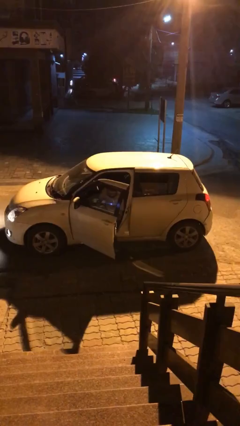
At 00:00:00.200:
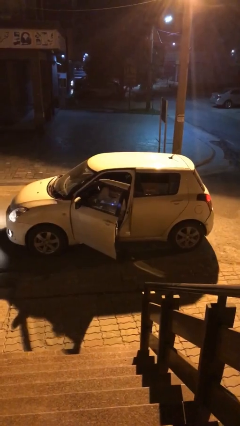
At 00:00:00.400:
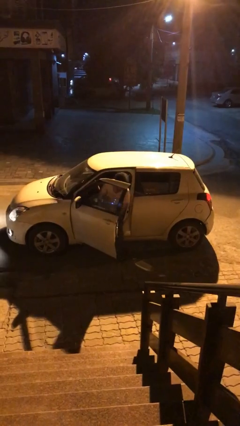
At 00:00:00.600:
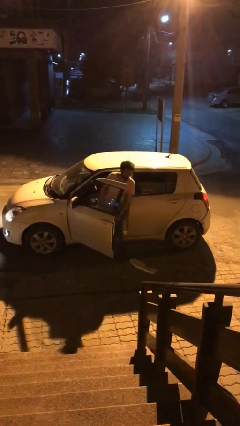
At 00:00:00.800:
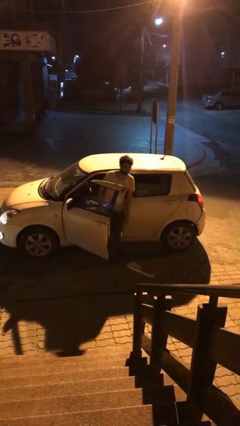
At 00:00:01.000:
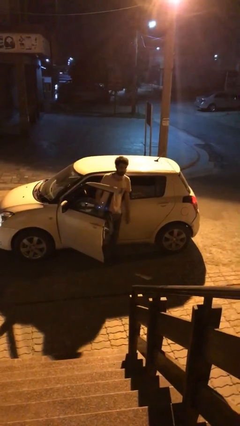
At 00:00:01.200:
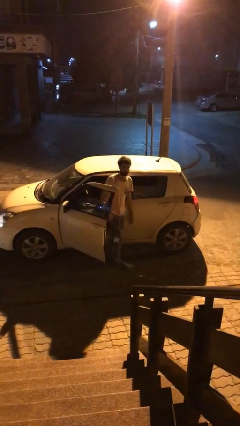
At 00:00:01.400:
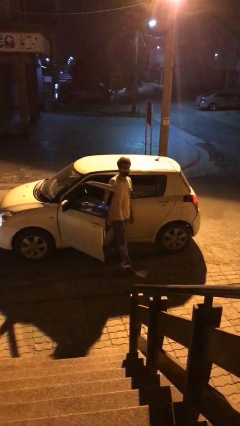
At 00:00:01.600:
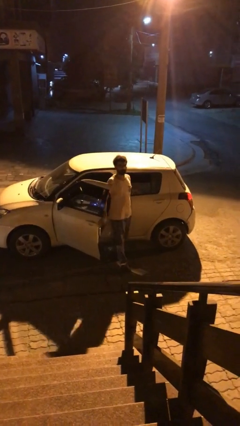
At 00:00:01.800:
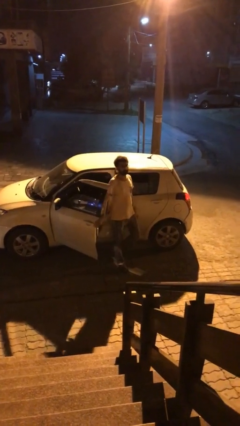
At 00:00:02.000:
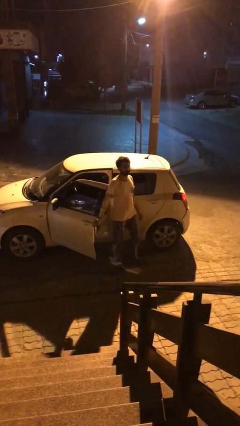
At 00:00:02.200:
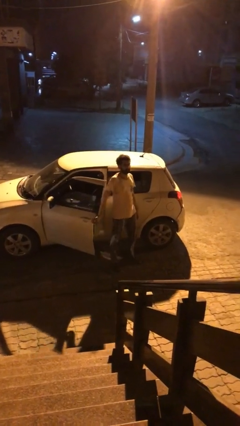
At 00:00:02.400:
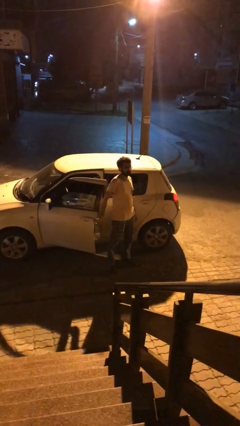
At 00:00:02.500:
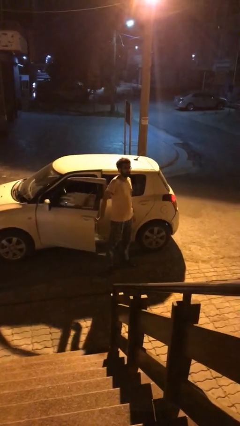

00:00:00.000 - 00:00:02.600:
person exits car

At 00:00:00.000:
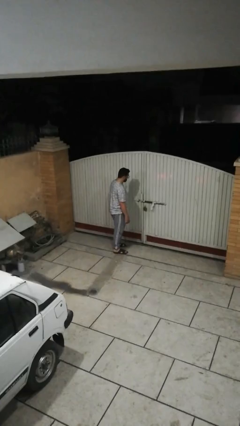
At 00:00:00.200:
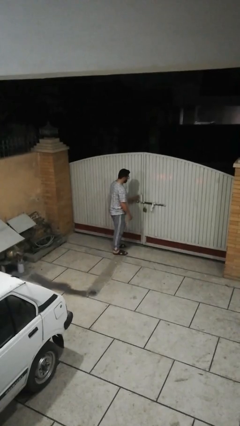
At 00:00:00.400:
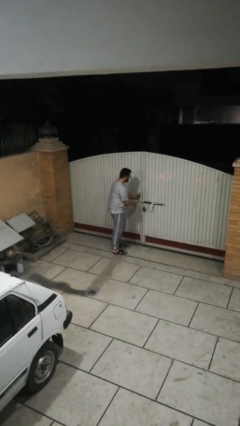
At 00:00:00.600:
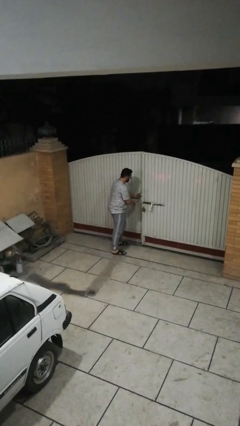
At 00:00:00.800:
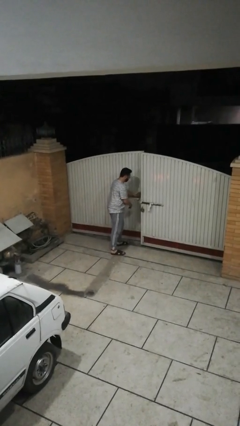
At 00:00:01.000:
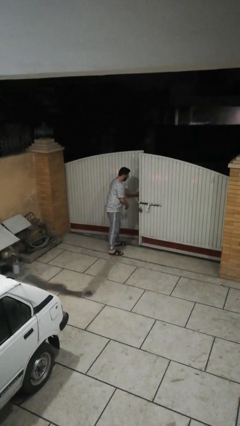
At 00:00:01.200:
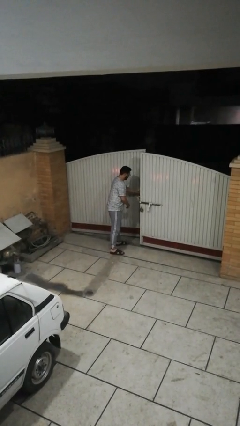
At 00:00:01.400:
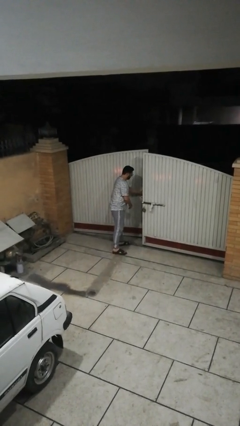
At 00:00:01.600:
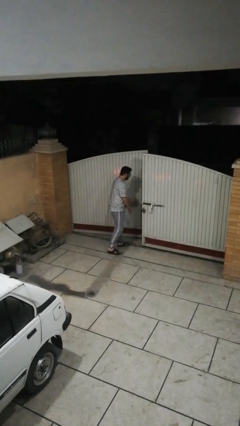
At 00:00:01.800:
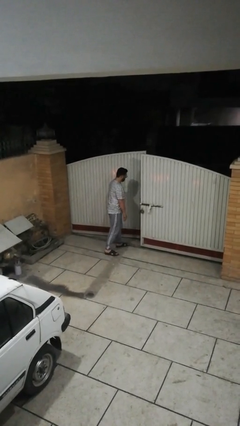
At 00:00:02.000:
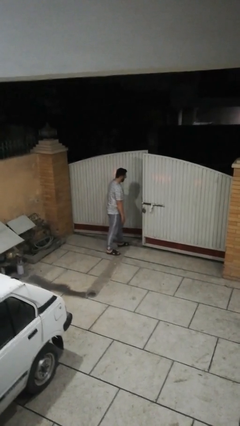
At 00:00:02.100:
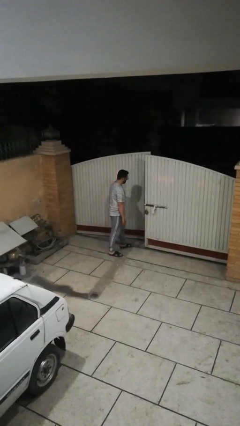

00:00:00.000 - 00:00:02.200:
person opens facility door

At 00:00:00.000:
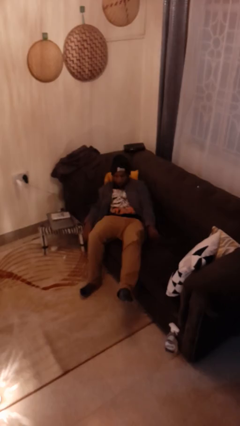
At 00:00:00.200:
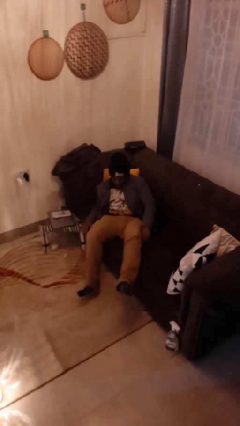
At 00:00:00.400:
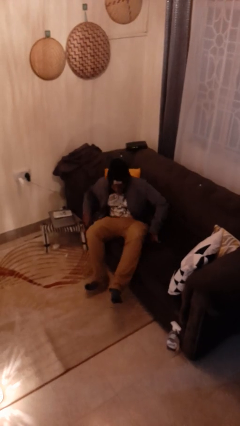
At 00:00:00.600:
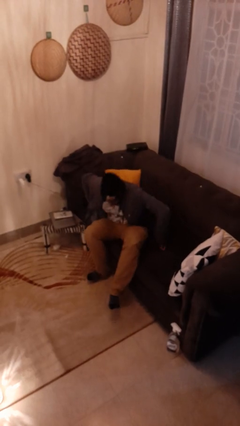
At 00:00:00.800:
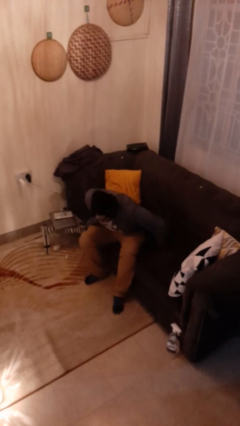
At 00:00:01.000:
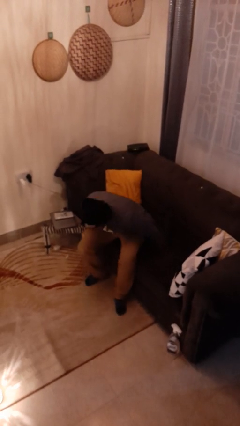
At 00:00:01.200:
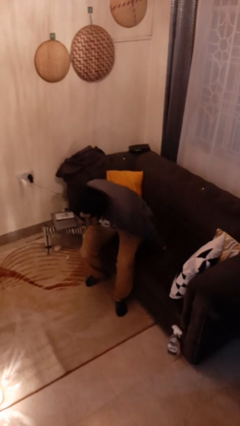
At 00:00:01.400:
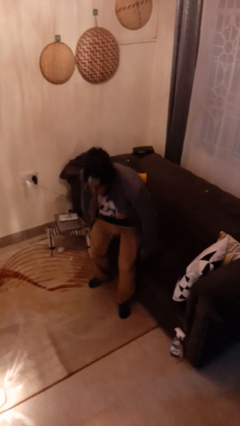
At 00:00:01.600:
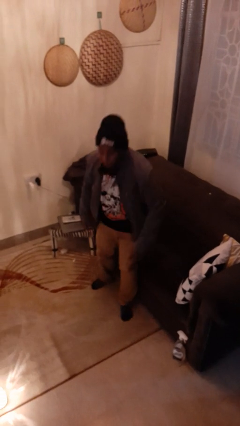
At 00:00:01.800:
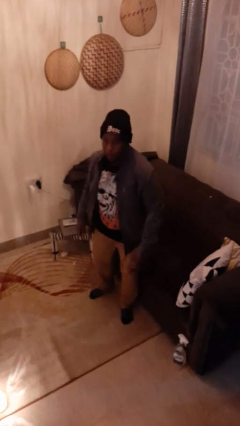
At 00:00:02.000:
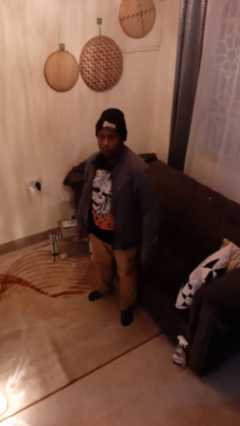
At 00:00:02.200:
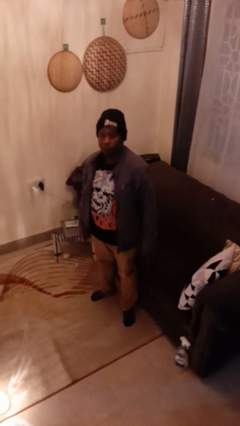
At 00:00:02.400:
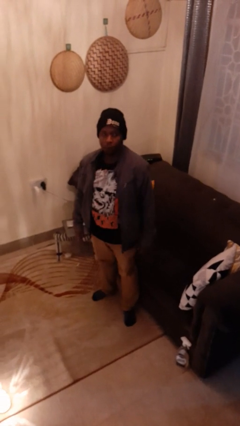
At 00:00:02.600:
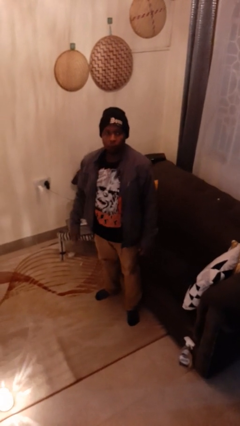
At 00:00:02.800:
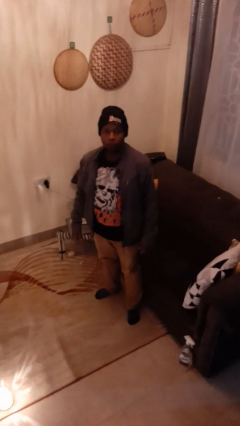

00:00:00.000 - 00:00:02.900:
person stands up

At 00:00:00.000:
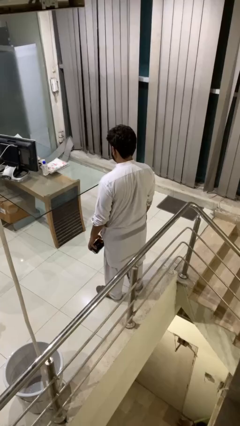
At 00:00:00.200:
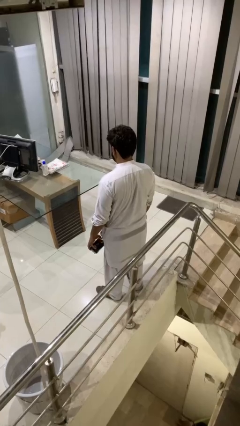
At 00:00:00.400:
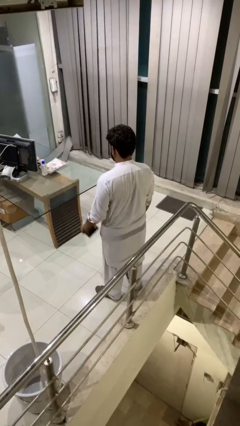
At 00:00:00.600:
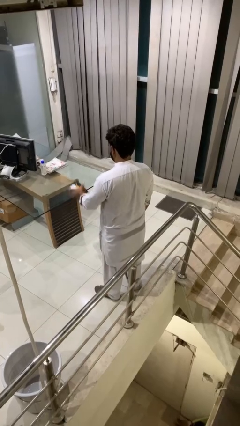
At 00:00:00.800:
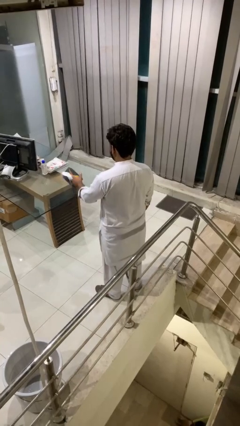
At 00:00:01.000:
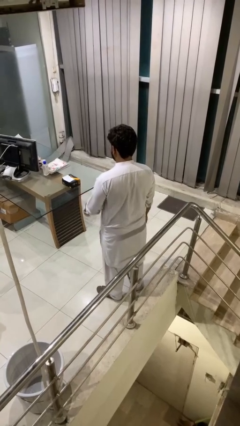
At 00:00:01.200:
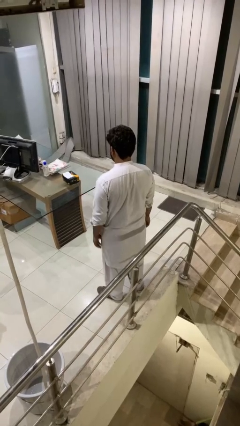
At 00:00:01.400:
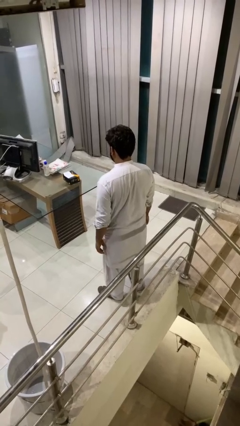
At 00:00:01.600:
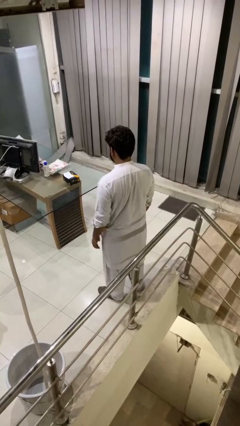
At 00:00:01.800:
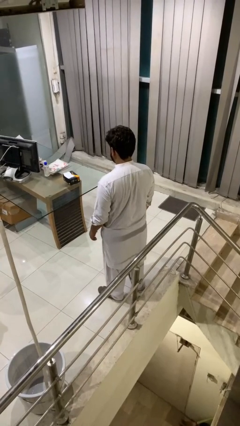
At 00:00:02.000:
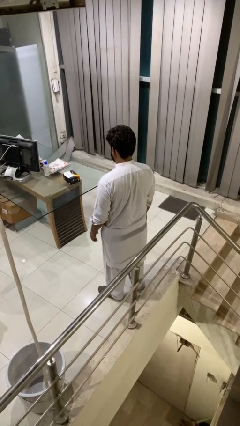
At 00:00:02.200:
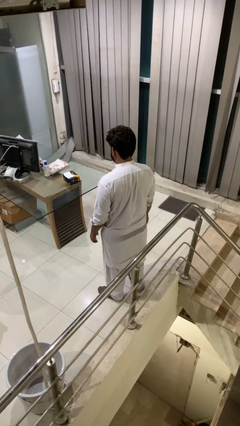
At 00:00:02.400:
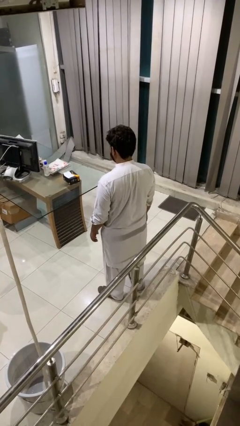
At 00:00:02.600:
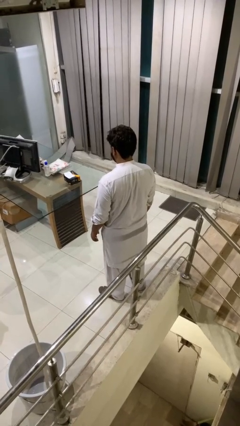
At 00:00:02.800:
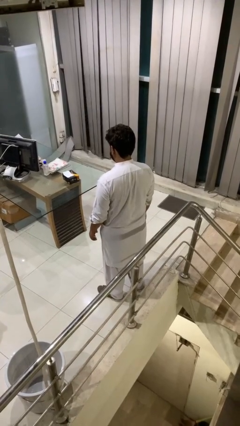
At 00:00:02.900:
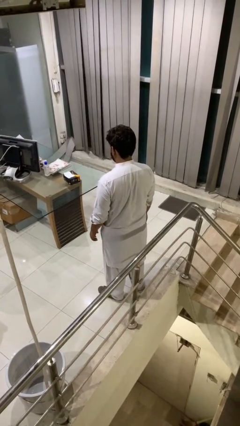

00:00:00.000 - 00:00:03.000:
person throws object on table

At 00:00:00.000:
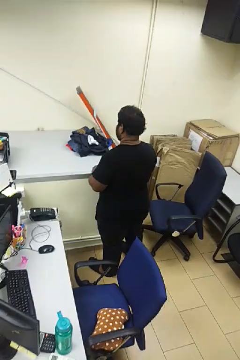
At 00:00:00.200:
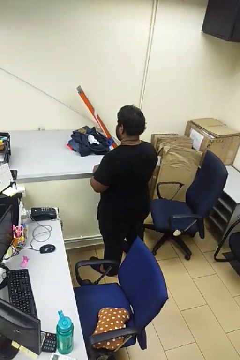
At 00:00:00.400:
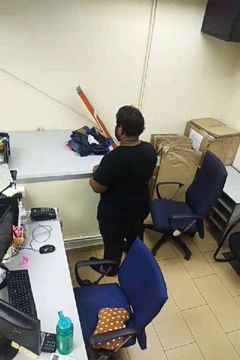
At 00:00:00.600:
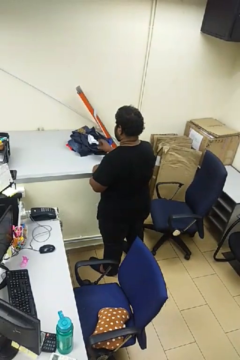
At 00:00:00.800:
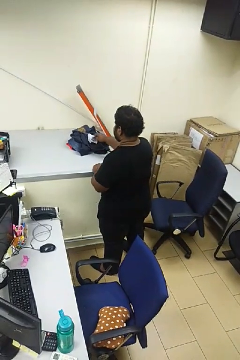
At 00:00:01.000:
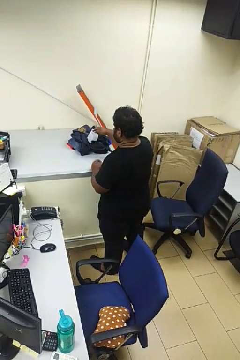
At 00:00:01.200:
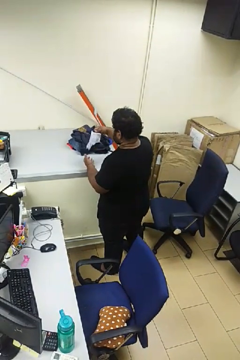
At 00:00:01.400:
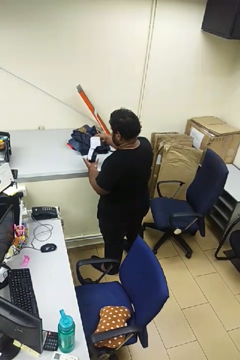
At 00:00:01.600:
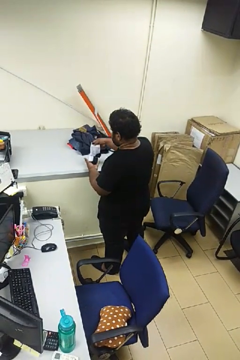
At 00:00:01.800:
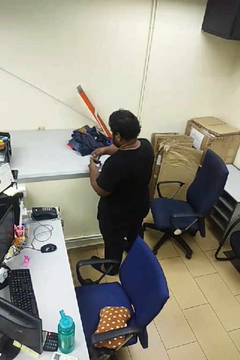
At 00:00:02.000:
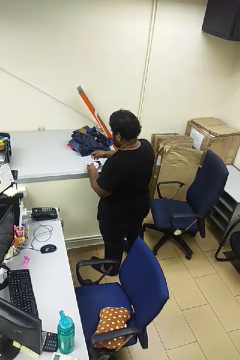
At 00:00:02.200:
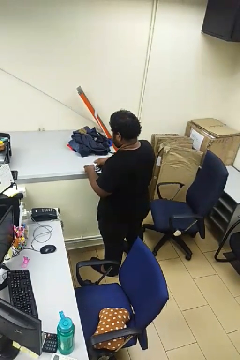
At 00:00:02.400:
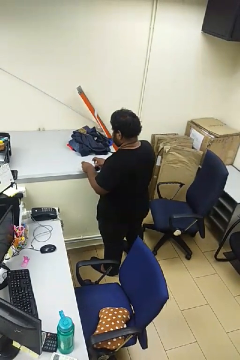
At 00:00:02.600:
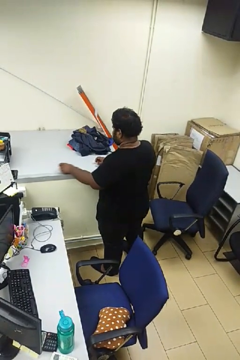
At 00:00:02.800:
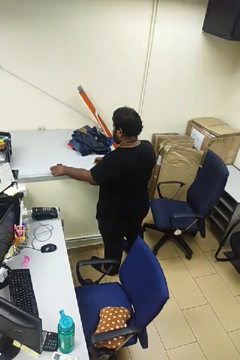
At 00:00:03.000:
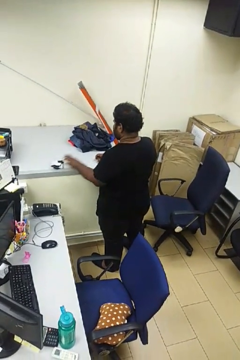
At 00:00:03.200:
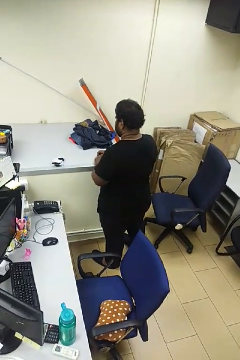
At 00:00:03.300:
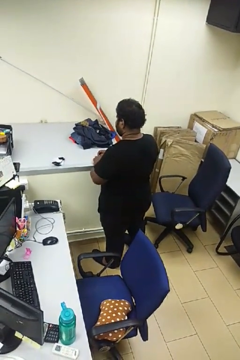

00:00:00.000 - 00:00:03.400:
person folds socks

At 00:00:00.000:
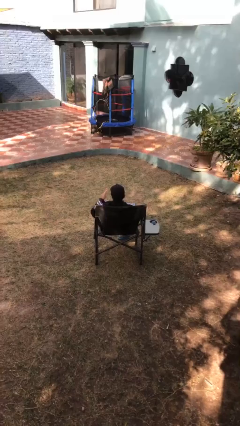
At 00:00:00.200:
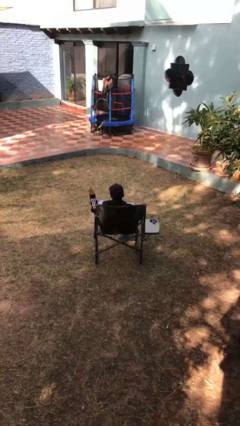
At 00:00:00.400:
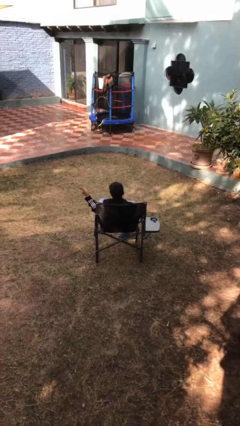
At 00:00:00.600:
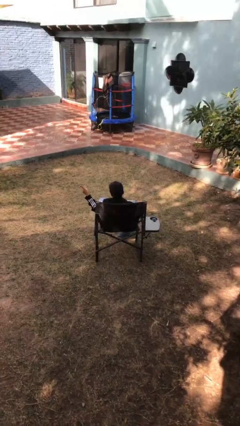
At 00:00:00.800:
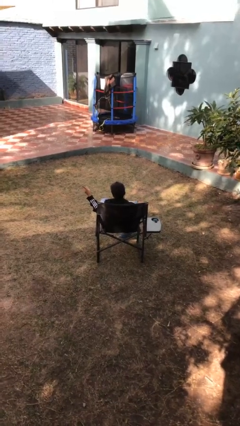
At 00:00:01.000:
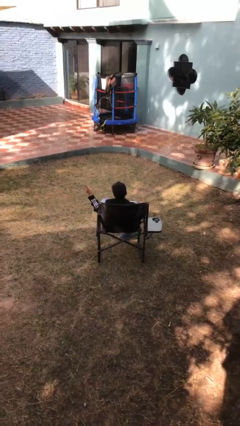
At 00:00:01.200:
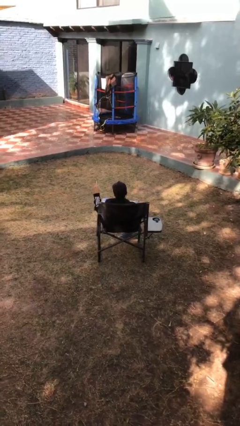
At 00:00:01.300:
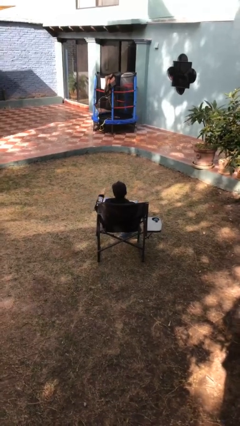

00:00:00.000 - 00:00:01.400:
person gestures number one

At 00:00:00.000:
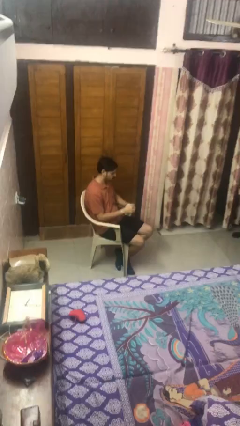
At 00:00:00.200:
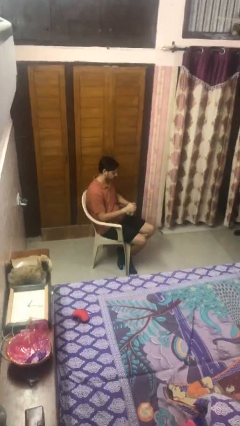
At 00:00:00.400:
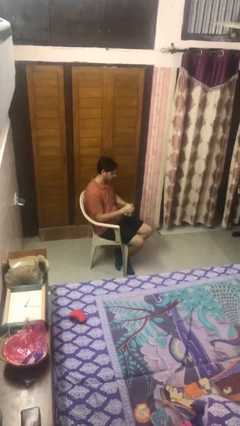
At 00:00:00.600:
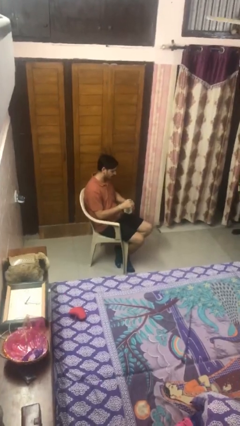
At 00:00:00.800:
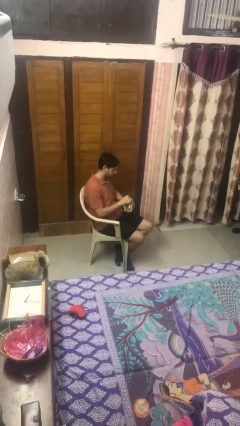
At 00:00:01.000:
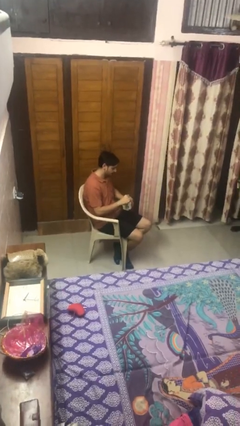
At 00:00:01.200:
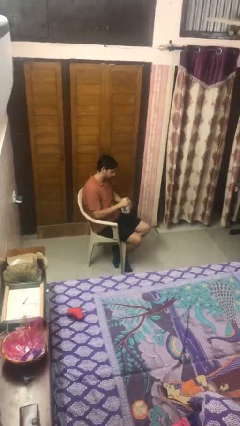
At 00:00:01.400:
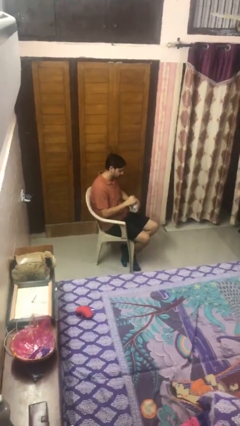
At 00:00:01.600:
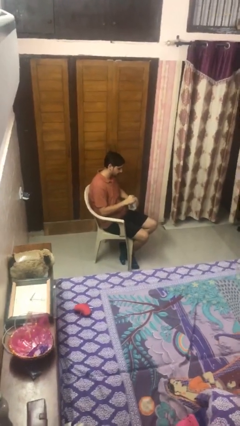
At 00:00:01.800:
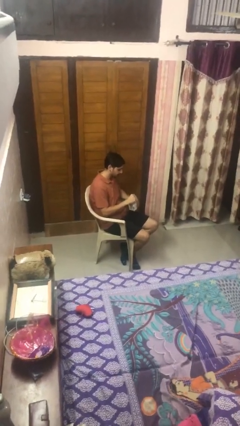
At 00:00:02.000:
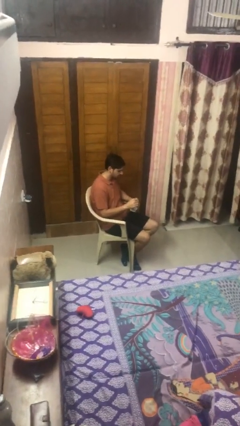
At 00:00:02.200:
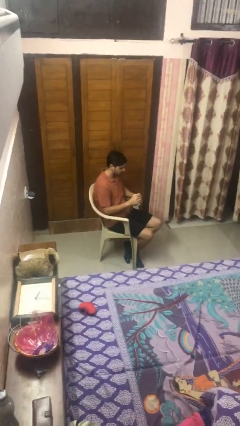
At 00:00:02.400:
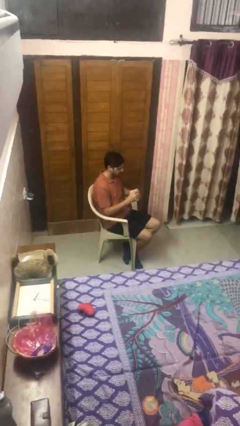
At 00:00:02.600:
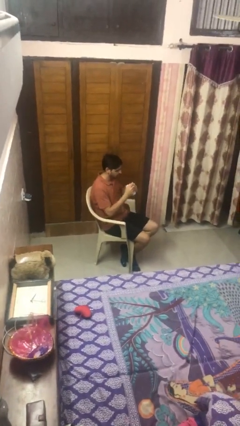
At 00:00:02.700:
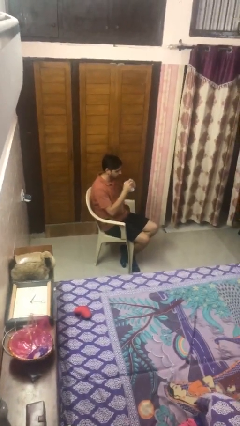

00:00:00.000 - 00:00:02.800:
person stirs mug
